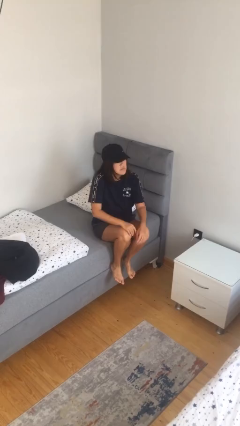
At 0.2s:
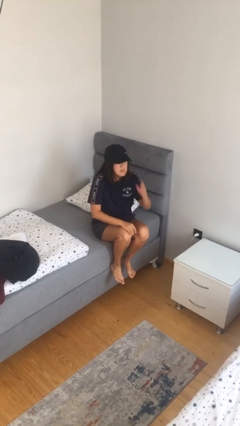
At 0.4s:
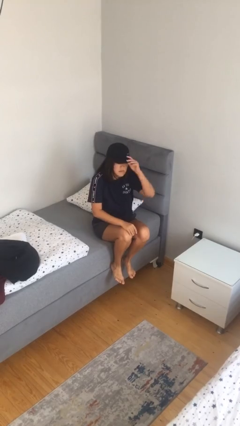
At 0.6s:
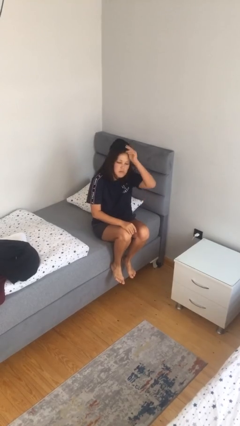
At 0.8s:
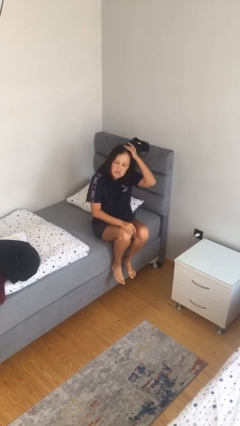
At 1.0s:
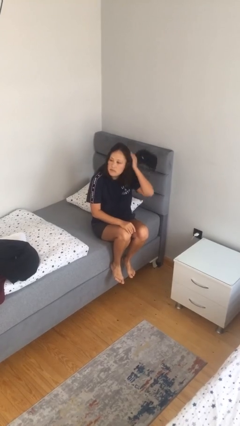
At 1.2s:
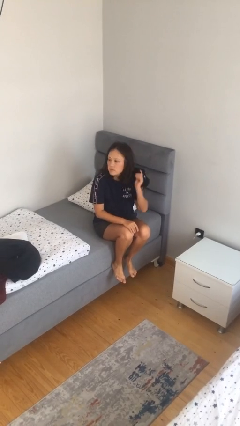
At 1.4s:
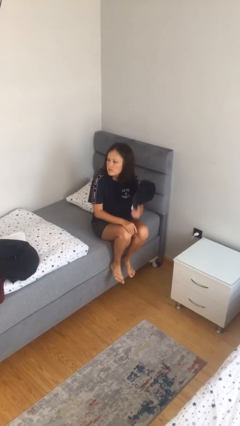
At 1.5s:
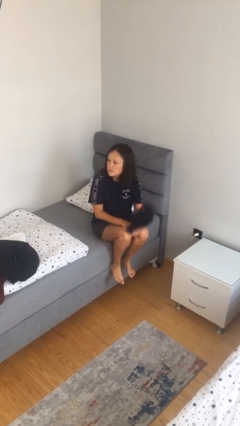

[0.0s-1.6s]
person takes off hat

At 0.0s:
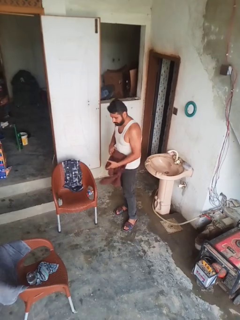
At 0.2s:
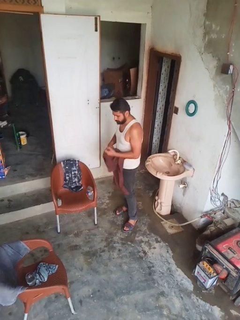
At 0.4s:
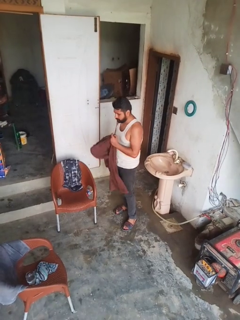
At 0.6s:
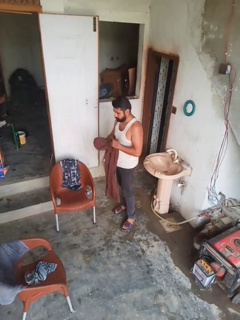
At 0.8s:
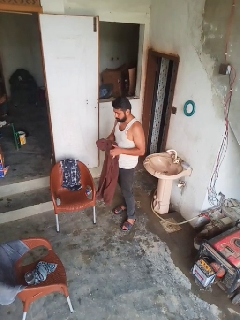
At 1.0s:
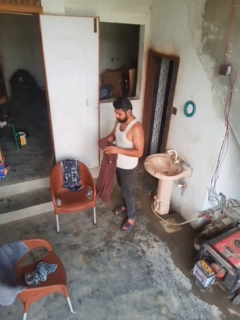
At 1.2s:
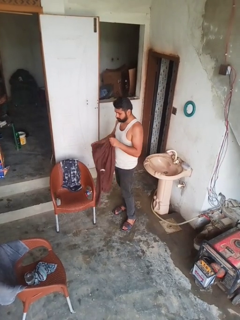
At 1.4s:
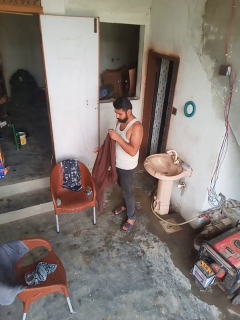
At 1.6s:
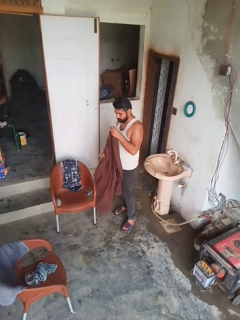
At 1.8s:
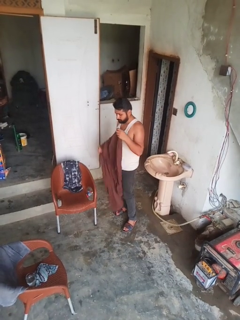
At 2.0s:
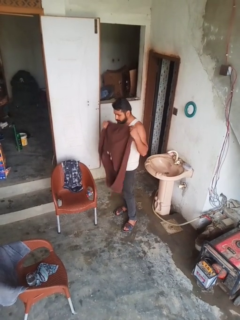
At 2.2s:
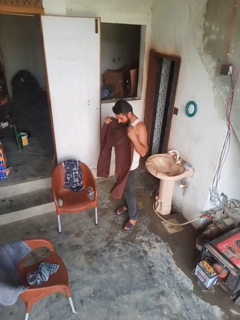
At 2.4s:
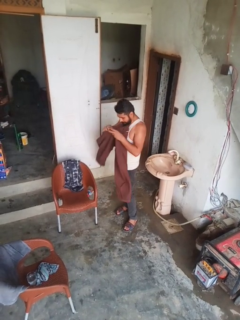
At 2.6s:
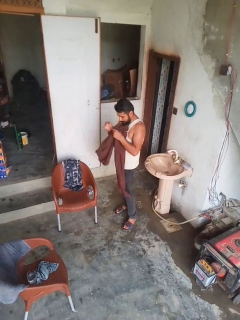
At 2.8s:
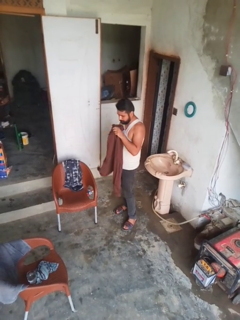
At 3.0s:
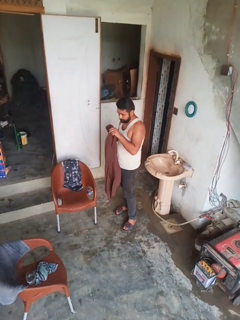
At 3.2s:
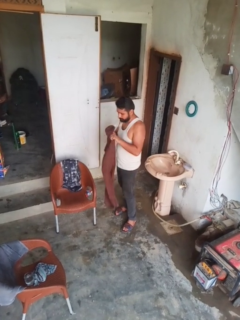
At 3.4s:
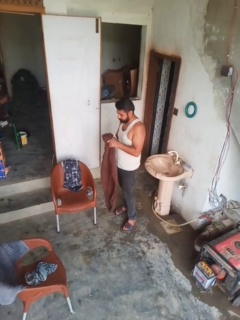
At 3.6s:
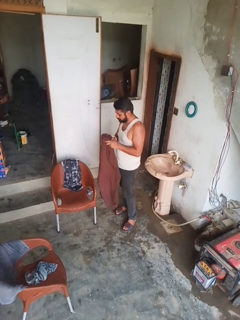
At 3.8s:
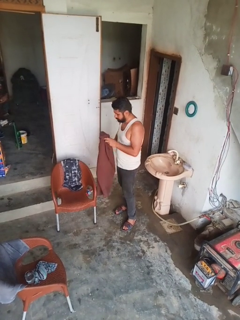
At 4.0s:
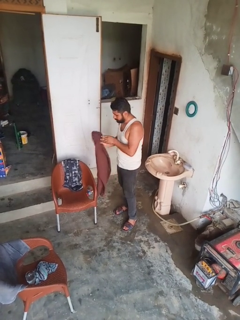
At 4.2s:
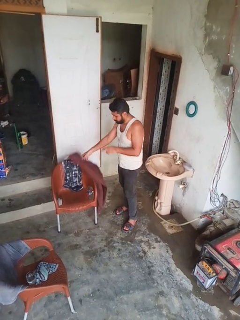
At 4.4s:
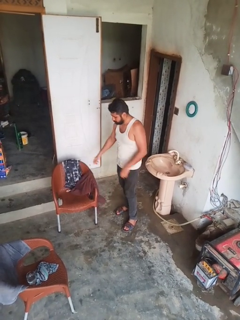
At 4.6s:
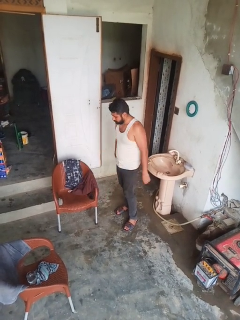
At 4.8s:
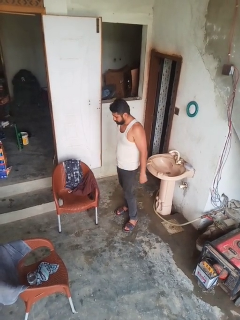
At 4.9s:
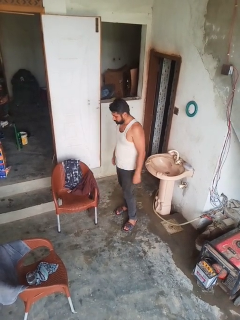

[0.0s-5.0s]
person folds pants

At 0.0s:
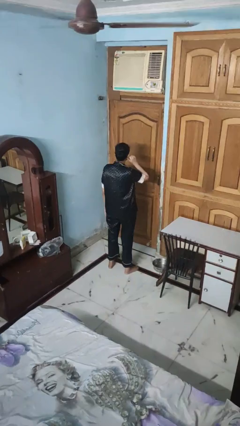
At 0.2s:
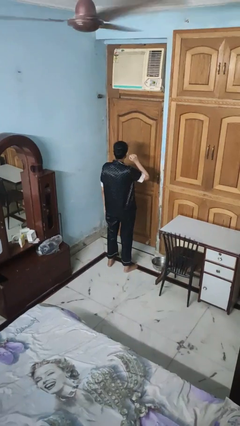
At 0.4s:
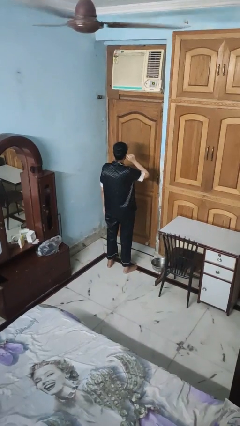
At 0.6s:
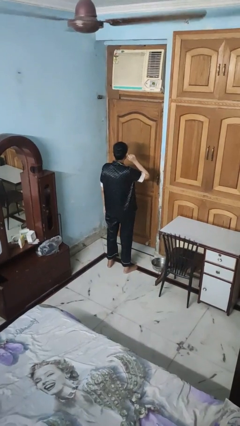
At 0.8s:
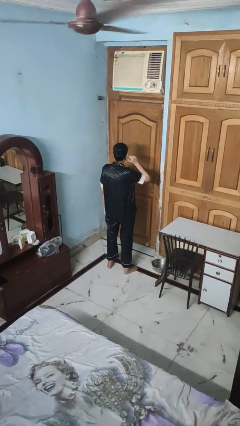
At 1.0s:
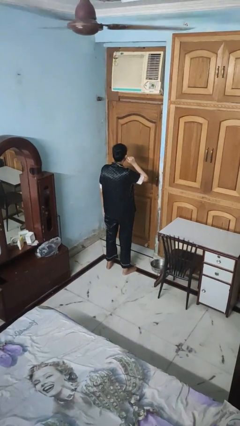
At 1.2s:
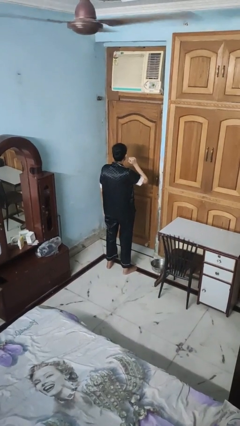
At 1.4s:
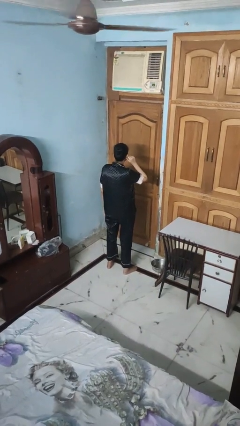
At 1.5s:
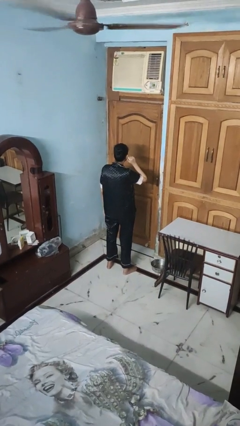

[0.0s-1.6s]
person touches earlobe

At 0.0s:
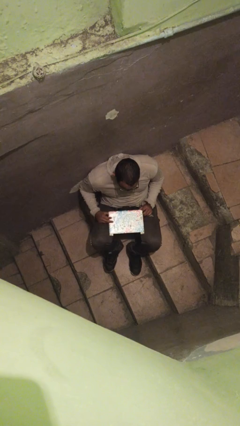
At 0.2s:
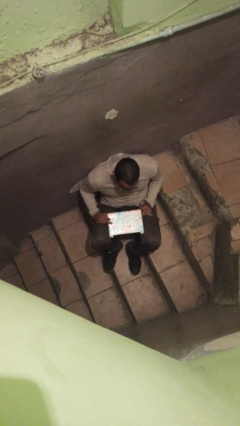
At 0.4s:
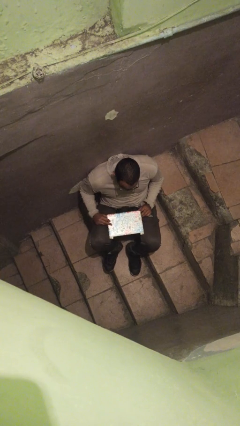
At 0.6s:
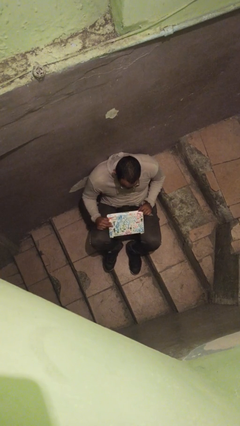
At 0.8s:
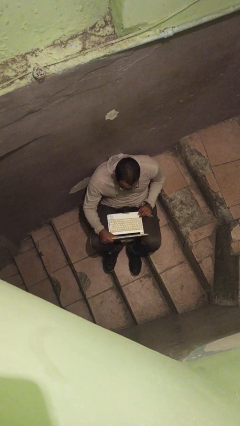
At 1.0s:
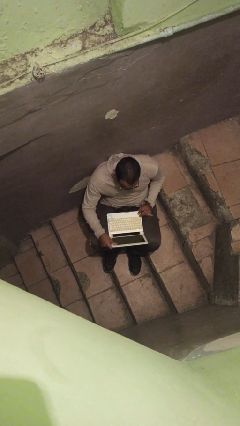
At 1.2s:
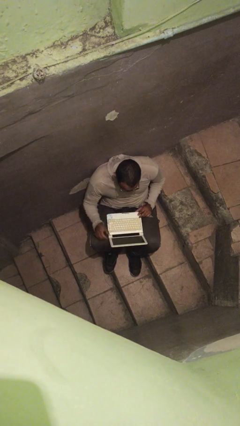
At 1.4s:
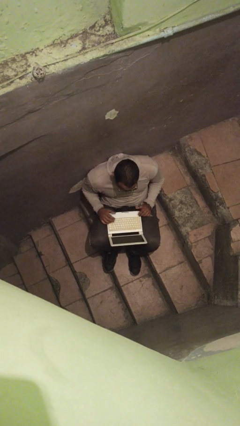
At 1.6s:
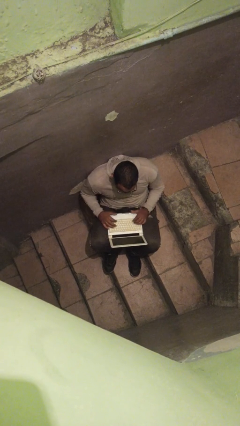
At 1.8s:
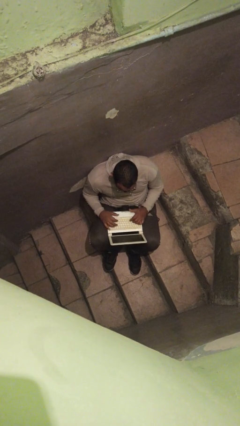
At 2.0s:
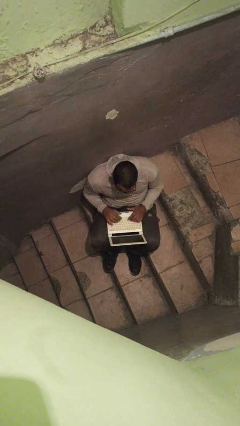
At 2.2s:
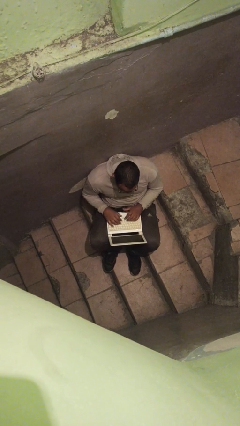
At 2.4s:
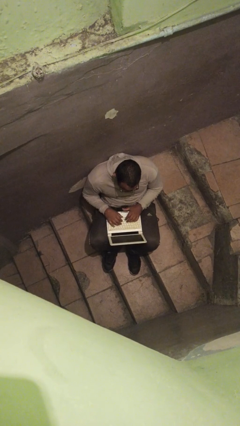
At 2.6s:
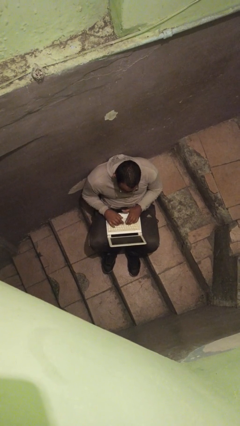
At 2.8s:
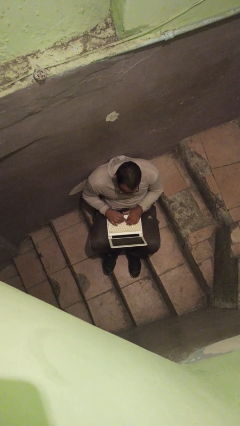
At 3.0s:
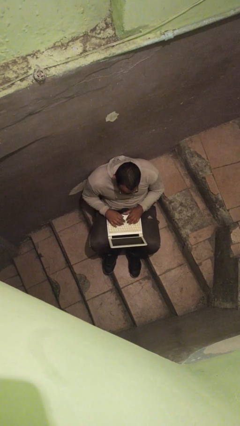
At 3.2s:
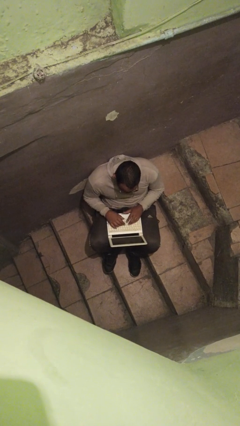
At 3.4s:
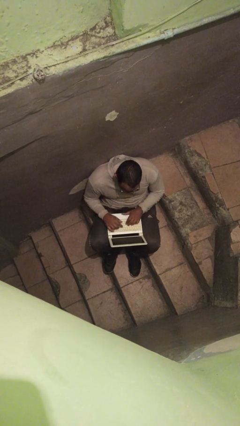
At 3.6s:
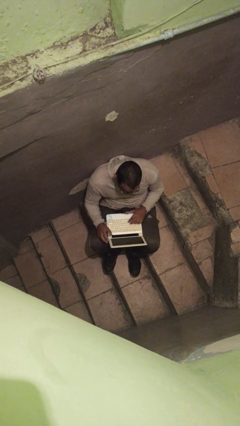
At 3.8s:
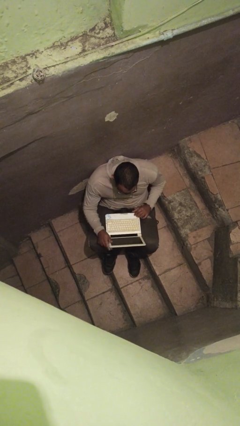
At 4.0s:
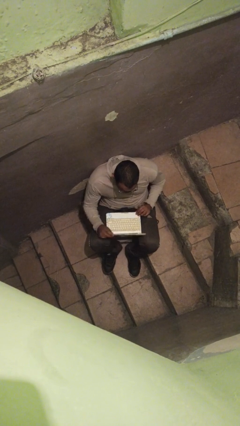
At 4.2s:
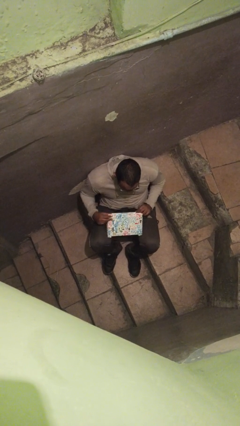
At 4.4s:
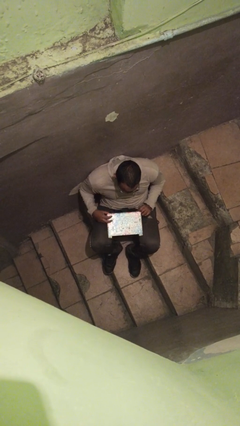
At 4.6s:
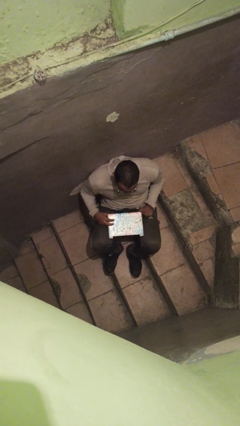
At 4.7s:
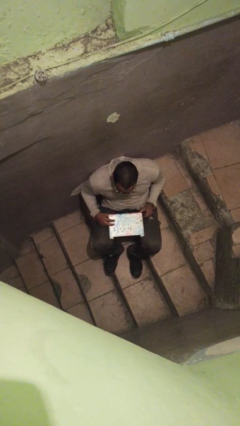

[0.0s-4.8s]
person interacts with laptop

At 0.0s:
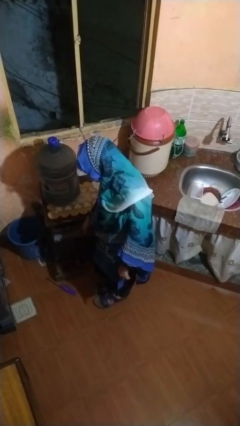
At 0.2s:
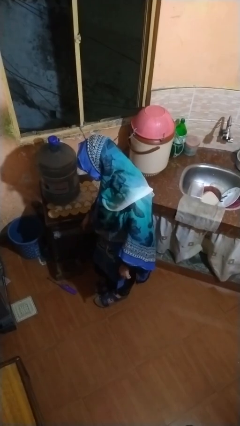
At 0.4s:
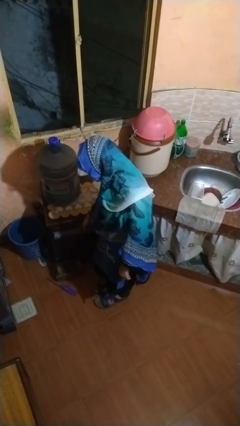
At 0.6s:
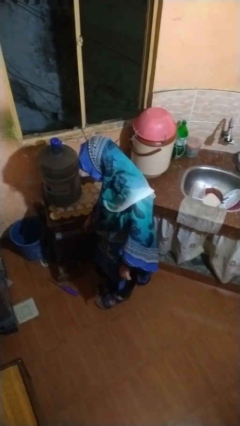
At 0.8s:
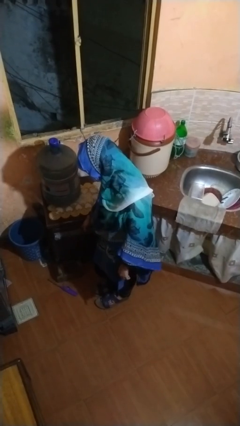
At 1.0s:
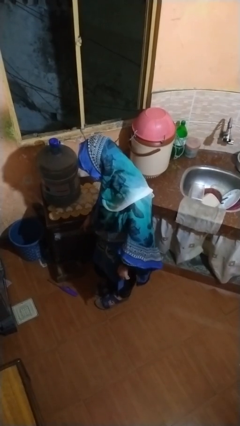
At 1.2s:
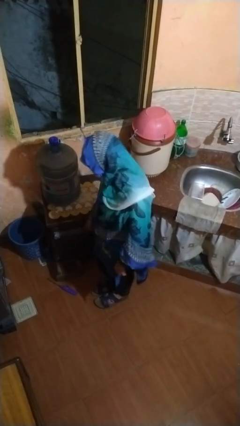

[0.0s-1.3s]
person closes kitchen drawer

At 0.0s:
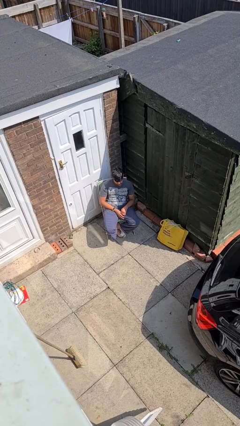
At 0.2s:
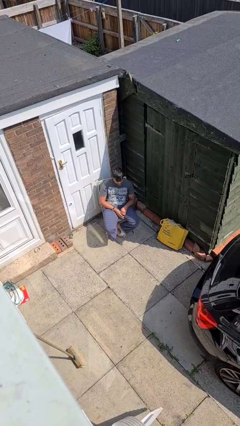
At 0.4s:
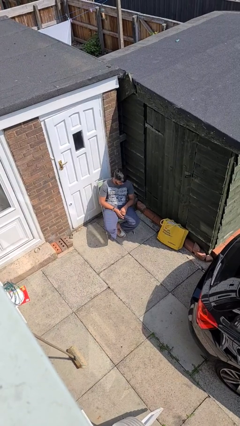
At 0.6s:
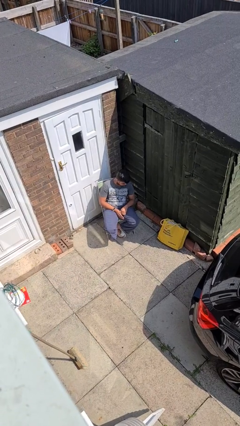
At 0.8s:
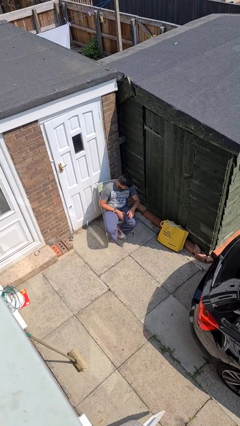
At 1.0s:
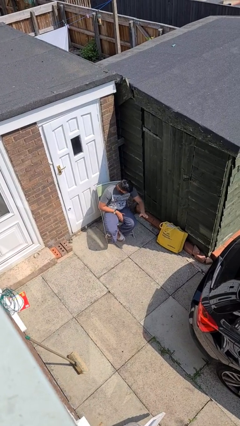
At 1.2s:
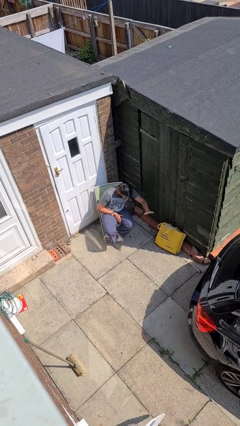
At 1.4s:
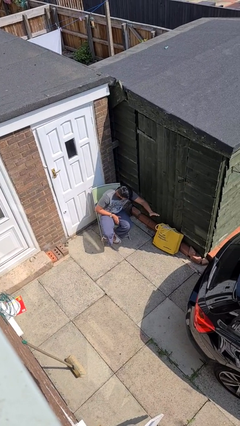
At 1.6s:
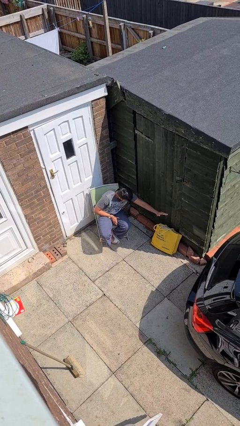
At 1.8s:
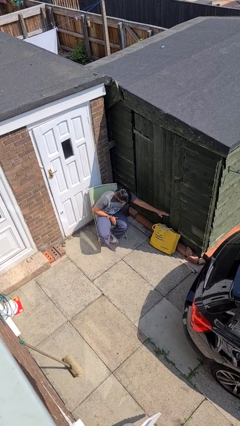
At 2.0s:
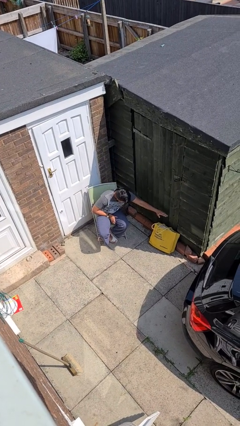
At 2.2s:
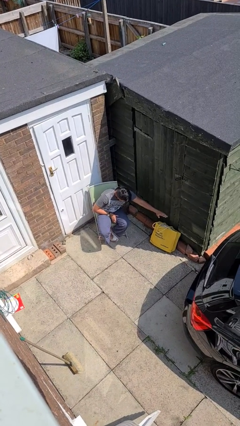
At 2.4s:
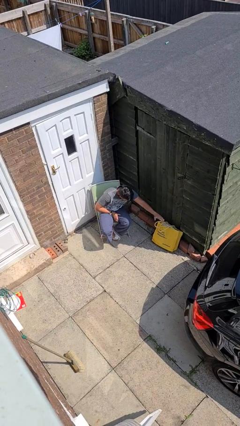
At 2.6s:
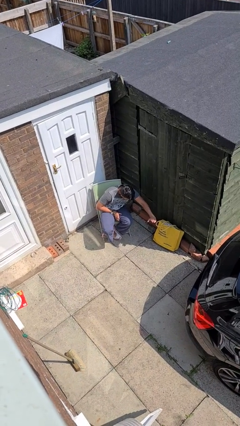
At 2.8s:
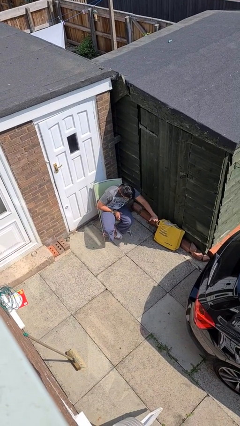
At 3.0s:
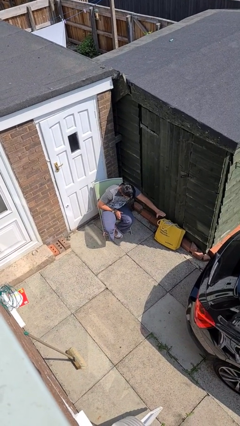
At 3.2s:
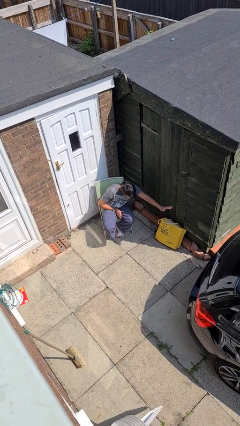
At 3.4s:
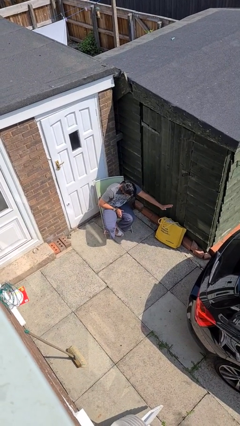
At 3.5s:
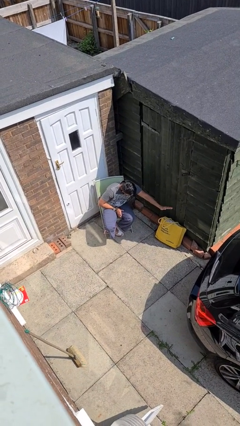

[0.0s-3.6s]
person waves hand over object

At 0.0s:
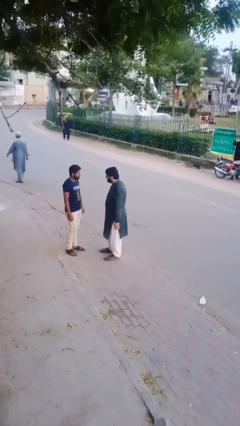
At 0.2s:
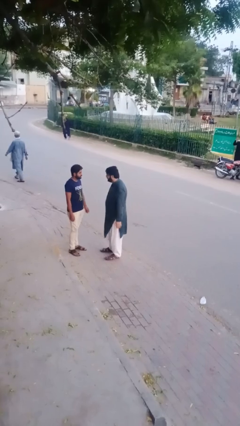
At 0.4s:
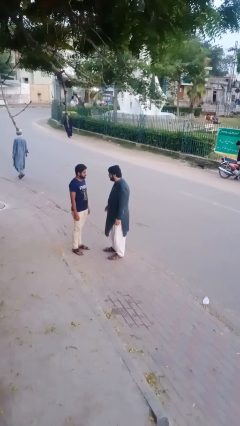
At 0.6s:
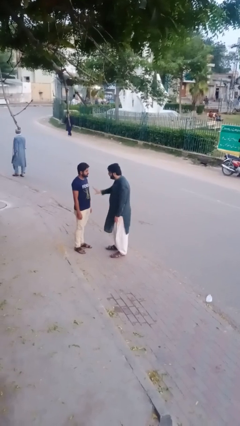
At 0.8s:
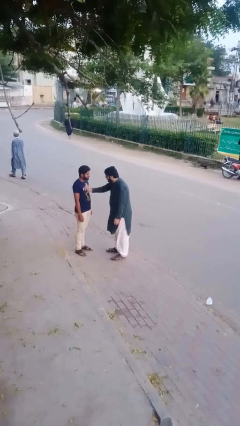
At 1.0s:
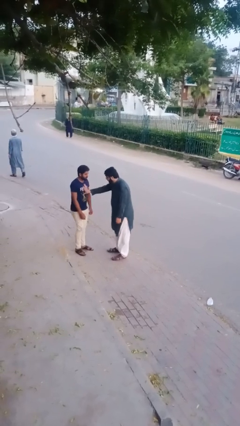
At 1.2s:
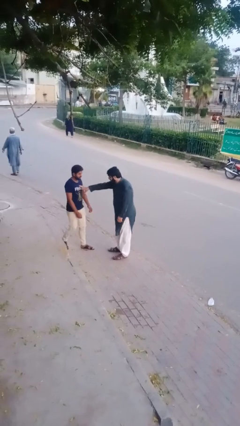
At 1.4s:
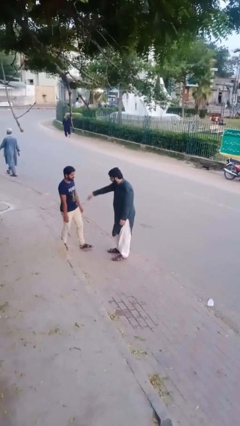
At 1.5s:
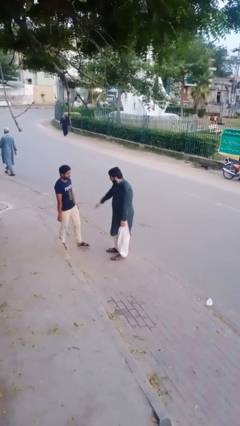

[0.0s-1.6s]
person shoves person
